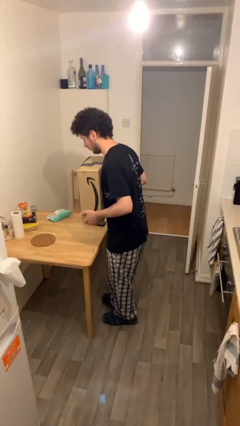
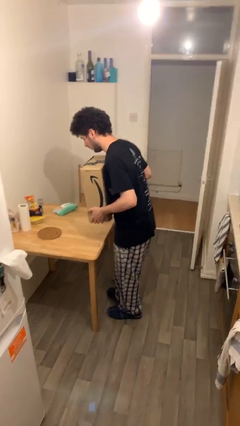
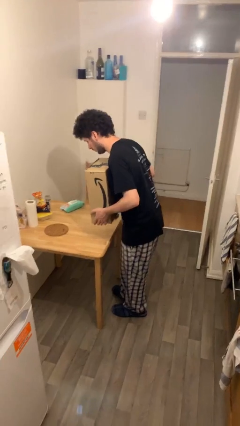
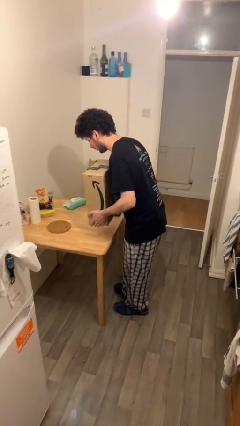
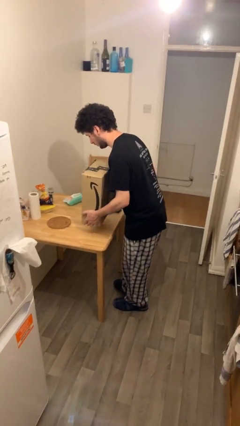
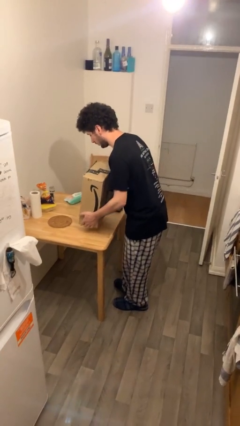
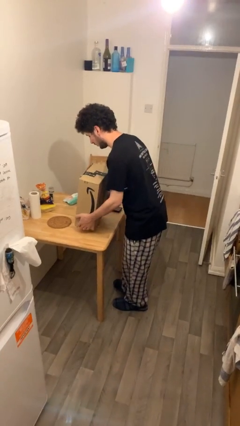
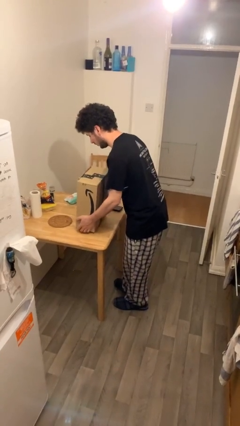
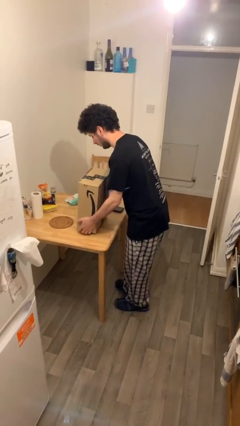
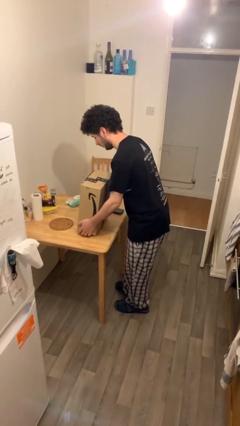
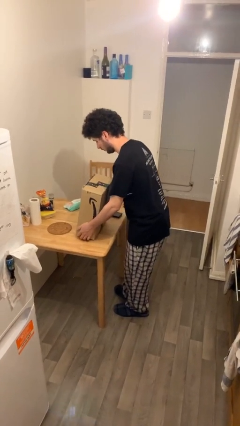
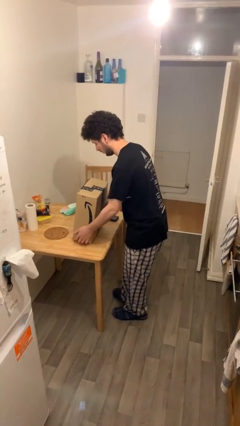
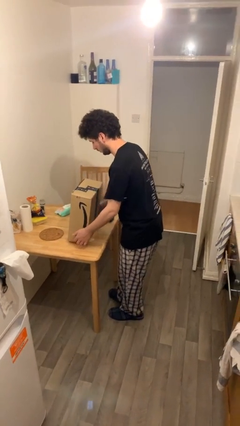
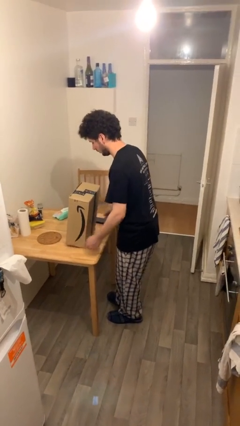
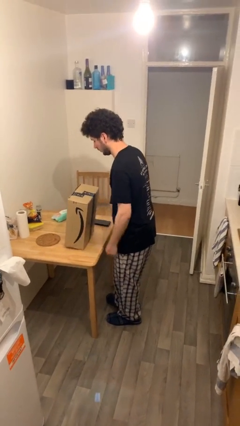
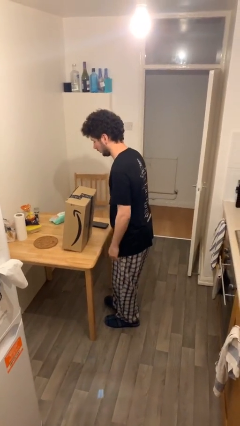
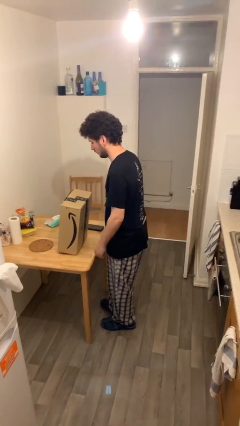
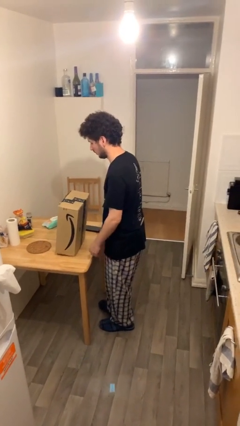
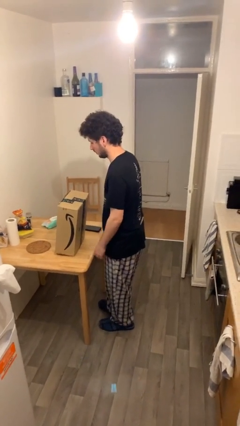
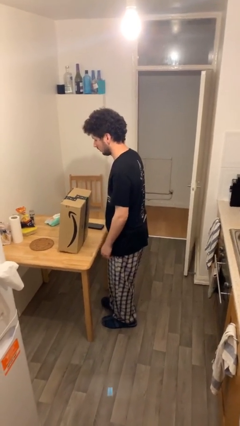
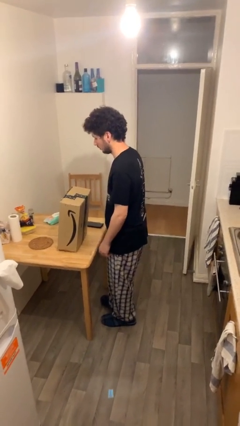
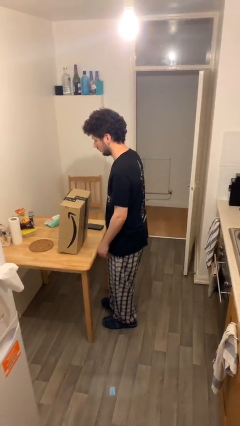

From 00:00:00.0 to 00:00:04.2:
person puts down object on table

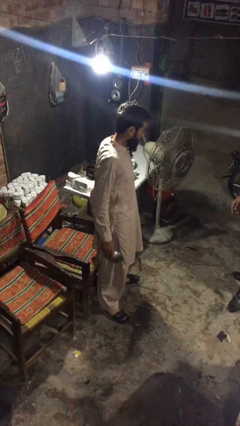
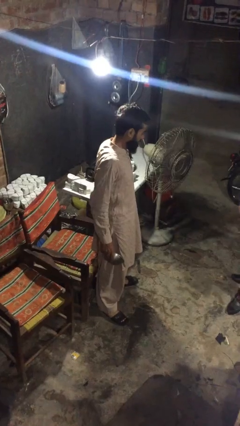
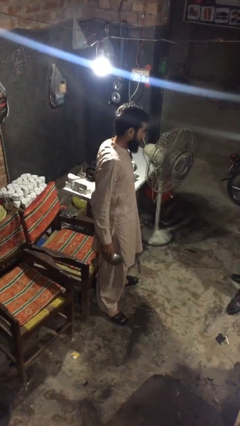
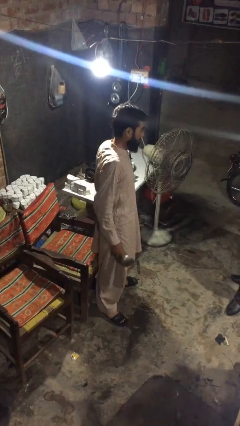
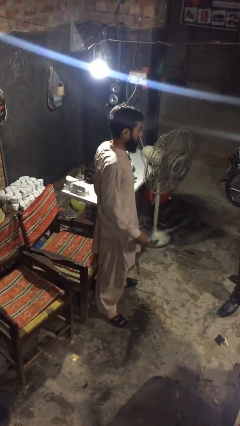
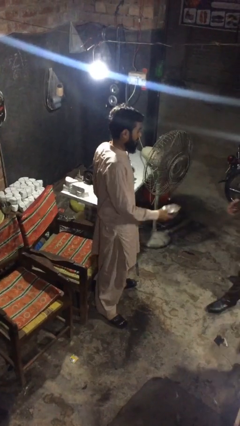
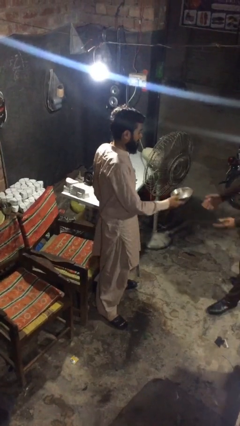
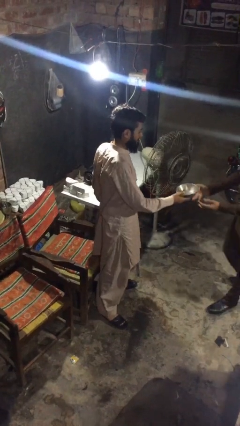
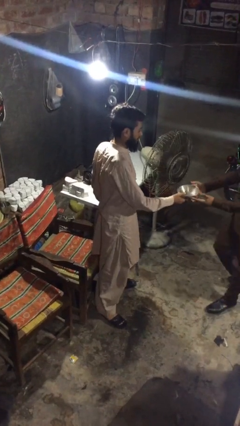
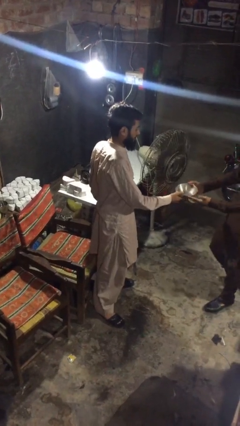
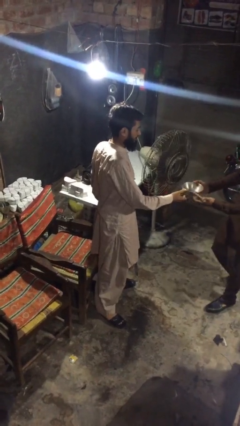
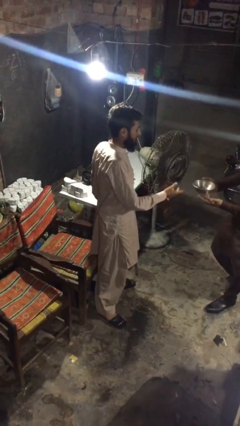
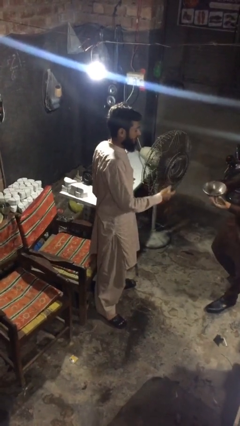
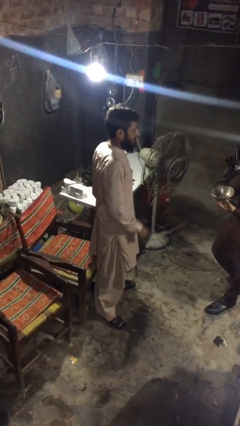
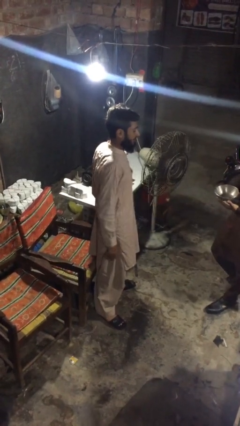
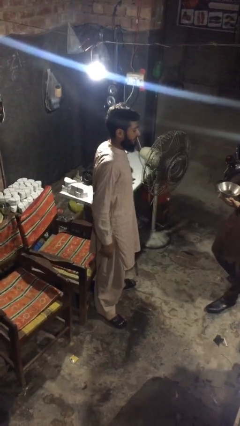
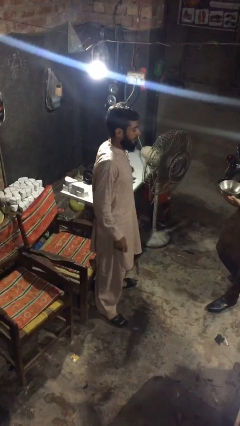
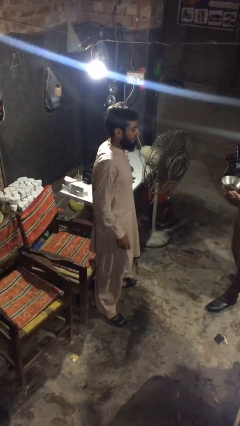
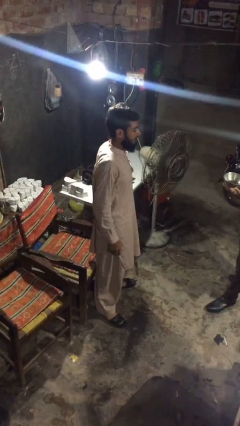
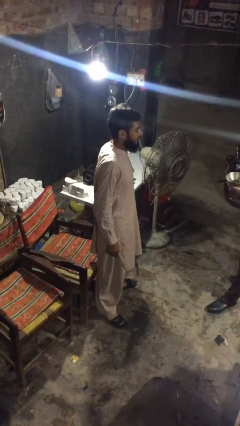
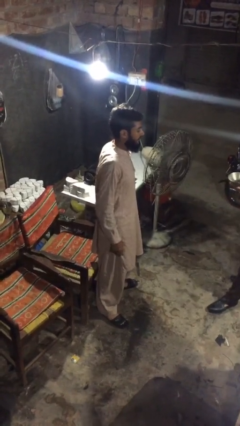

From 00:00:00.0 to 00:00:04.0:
person transfers object to person

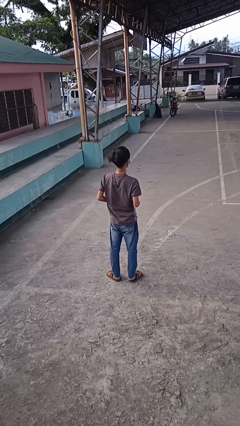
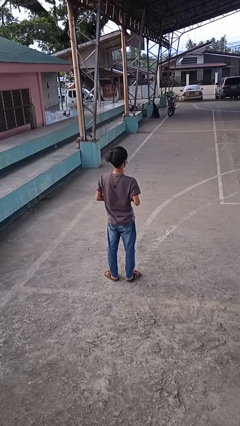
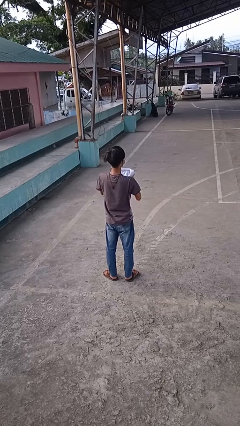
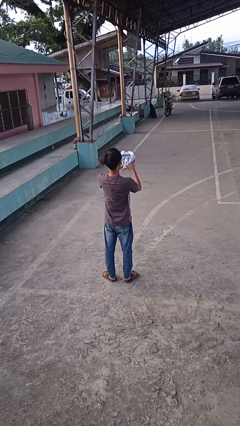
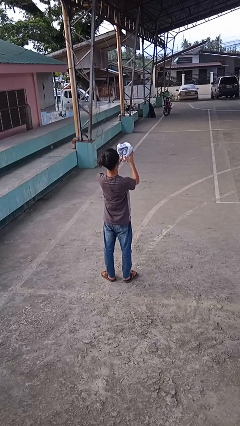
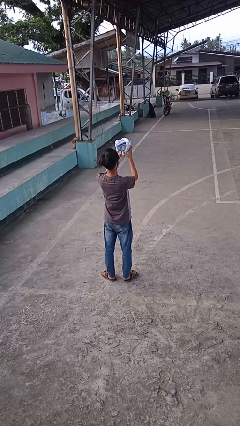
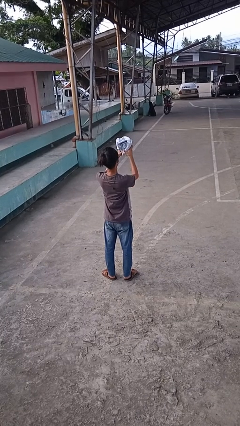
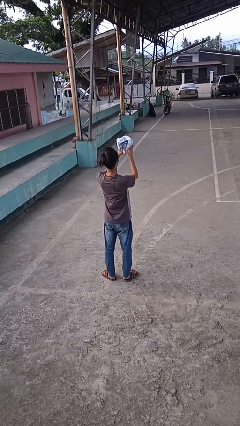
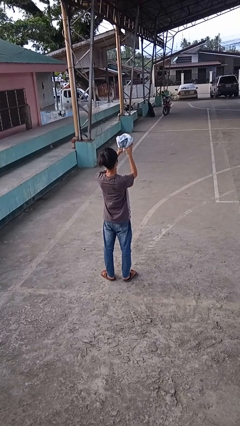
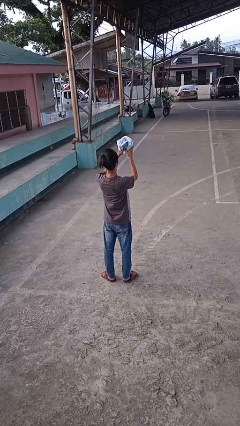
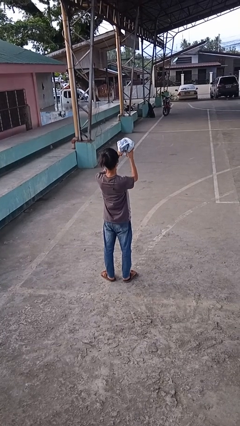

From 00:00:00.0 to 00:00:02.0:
person squeezes object

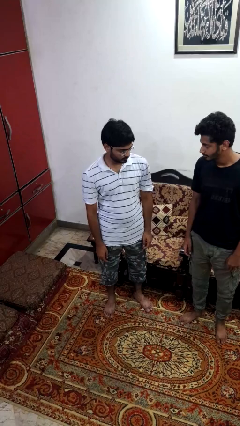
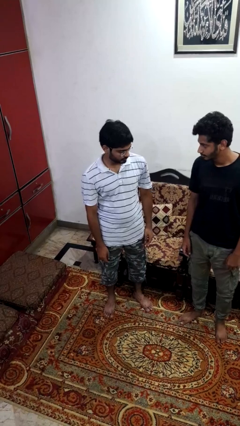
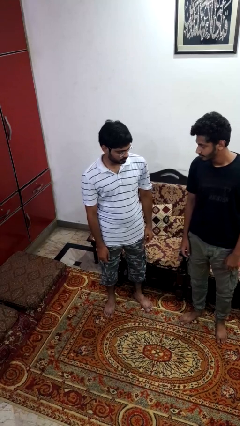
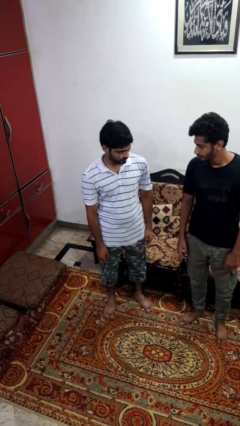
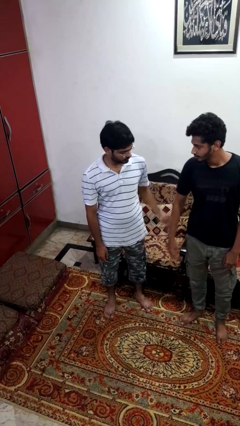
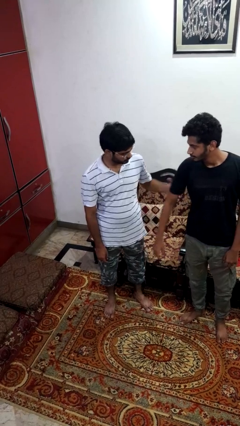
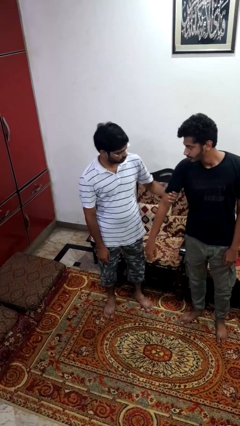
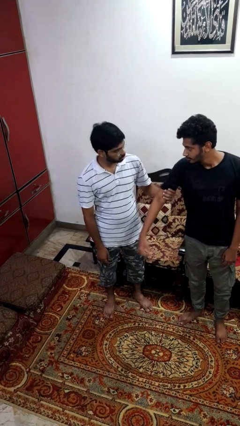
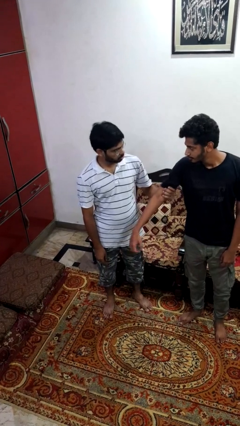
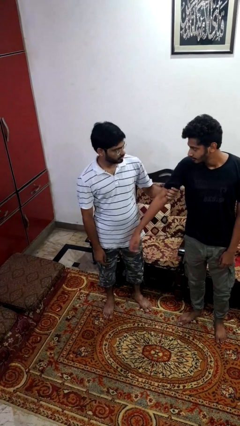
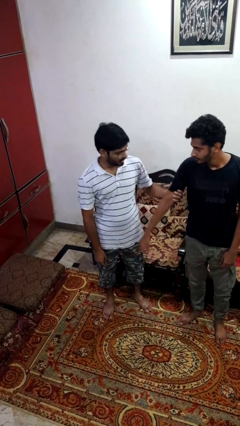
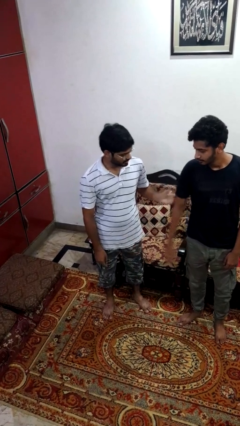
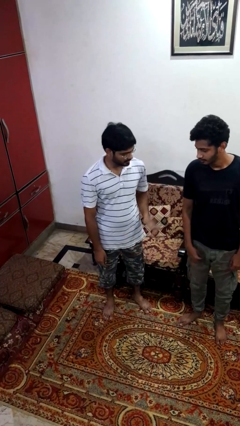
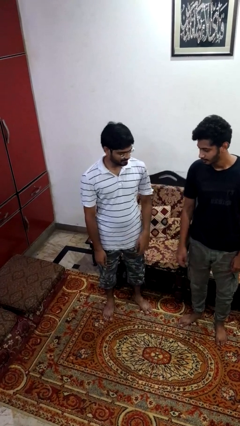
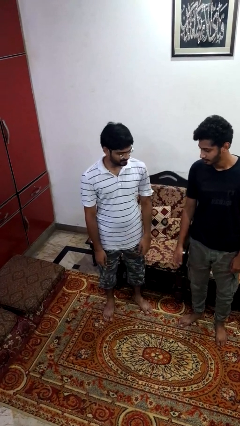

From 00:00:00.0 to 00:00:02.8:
person grabs person by bicep

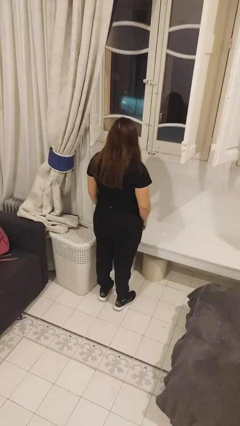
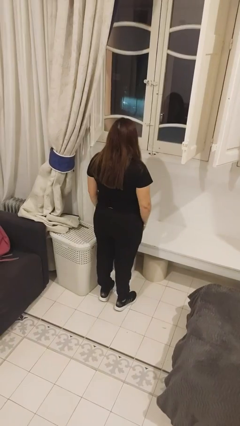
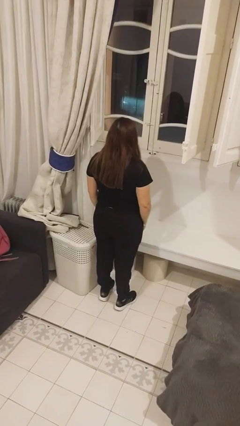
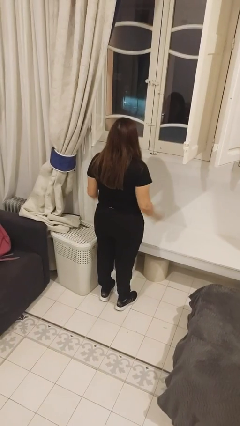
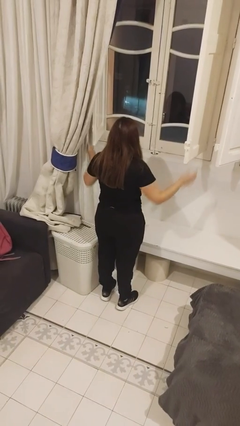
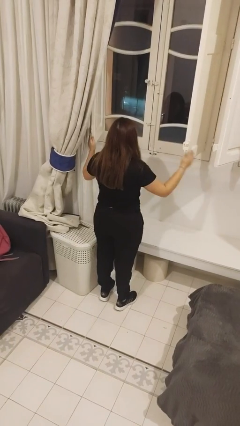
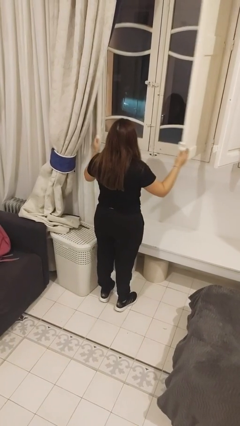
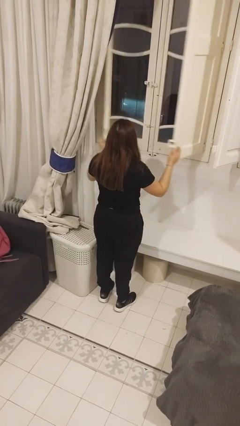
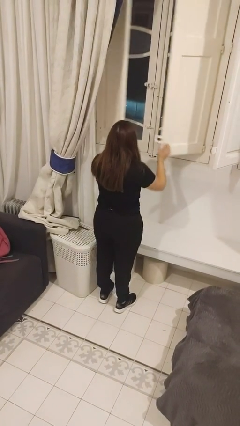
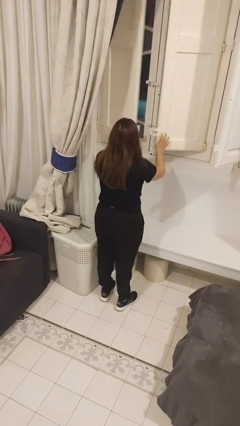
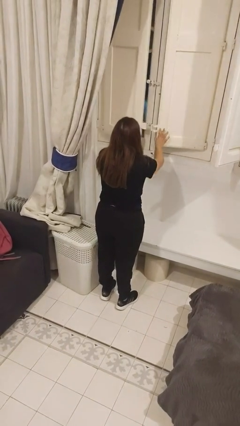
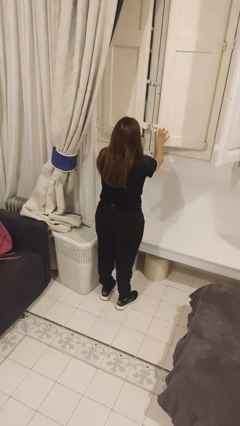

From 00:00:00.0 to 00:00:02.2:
person closes home window

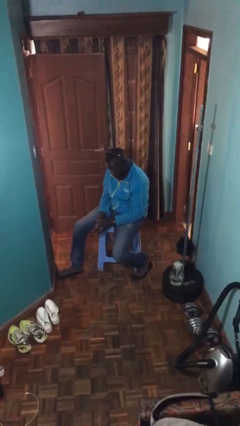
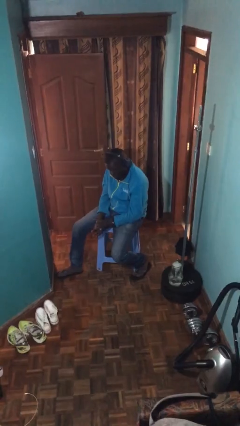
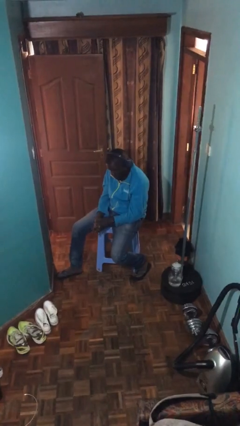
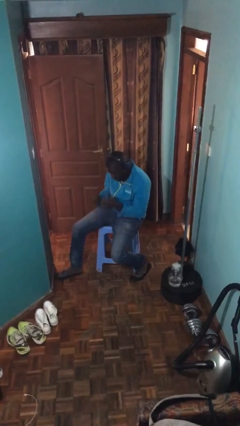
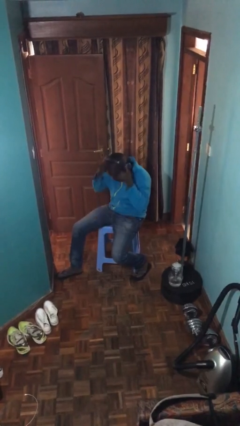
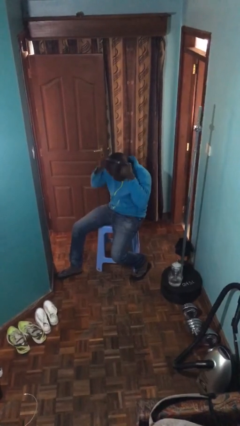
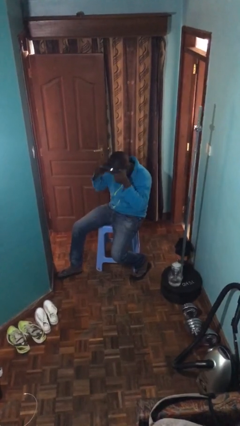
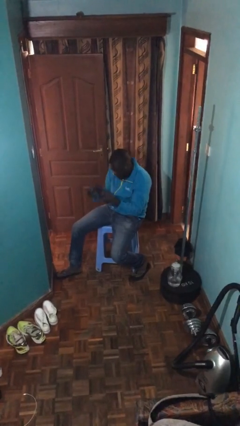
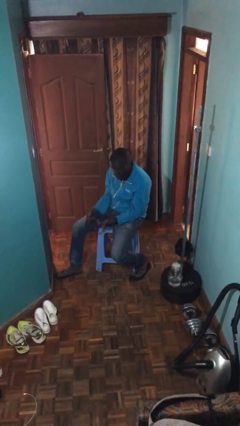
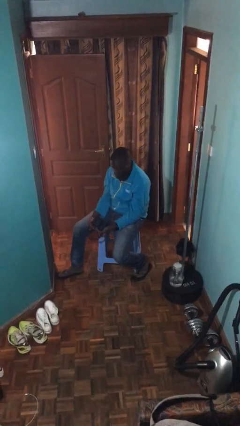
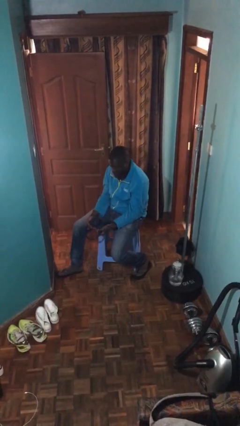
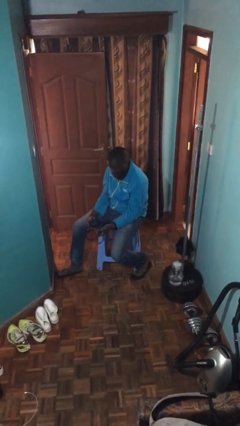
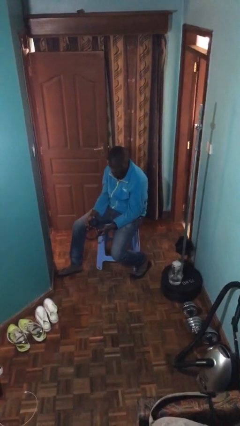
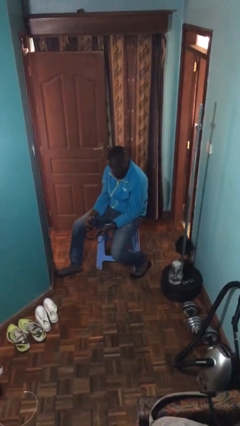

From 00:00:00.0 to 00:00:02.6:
person takes off headphones
